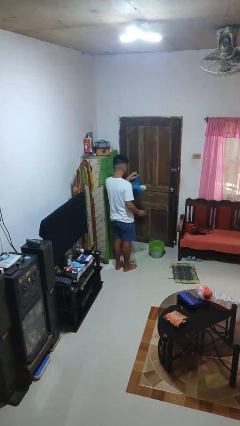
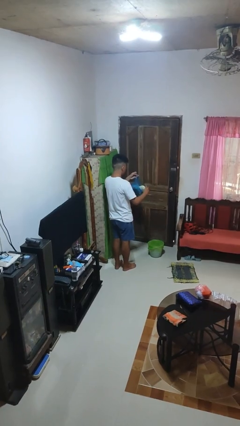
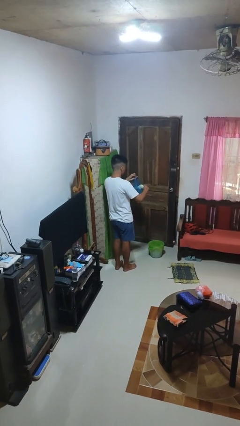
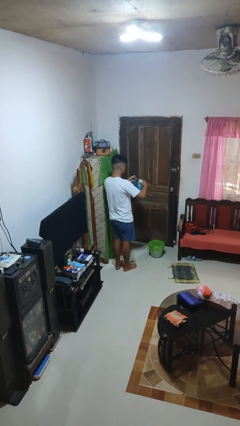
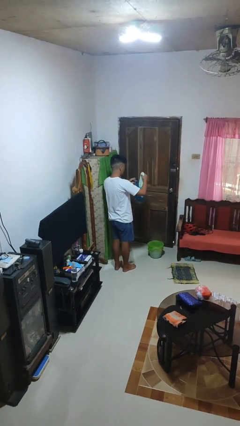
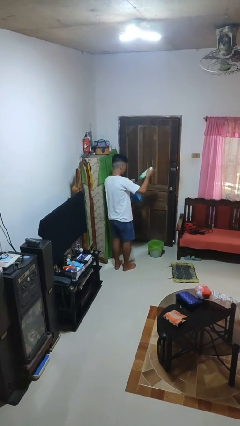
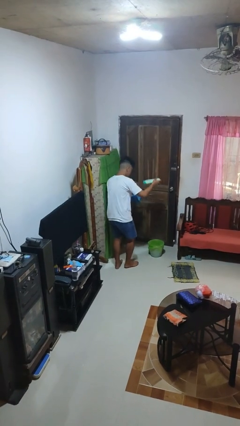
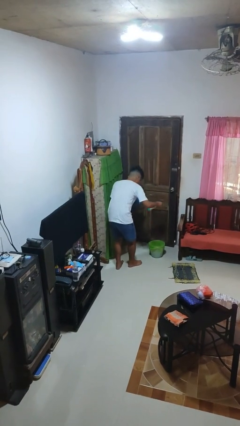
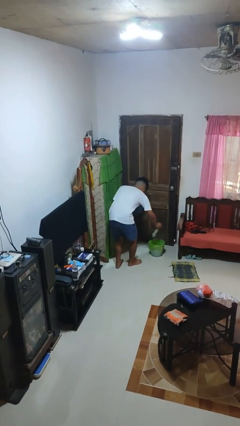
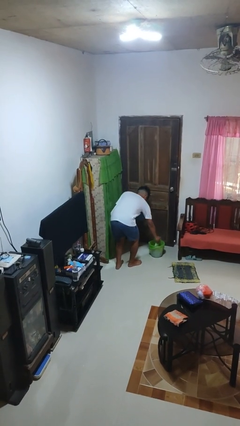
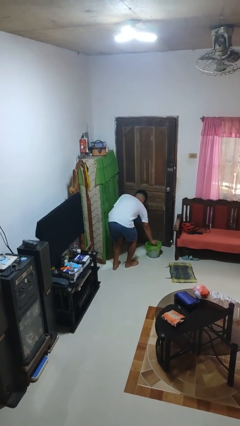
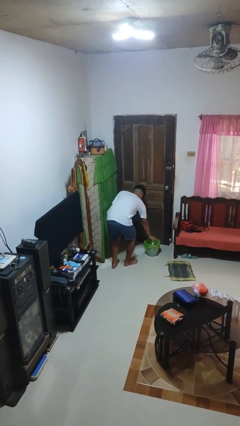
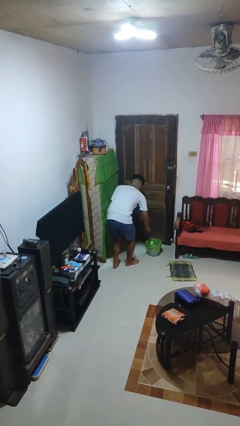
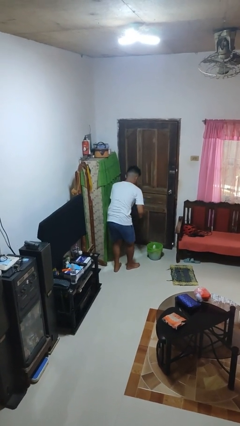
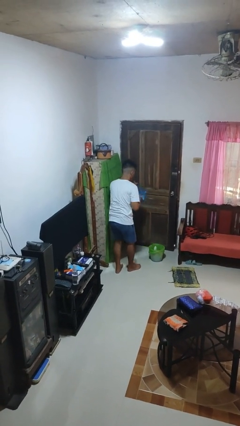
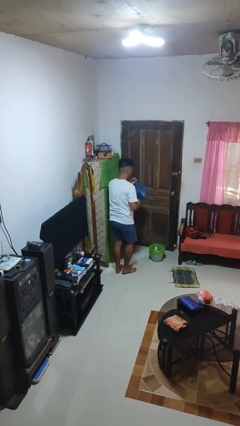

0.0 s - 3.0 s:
person discards trash

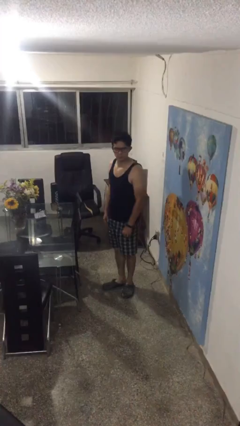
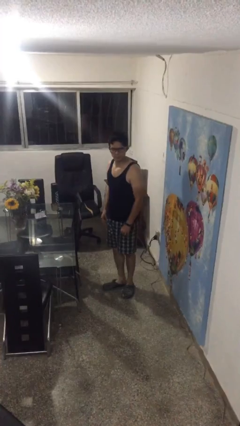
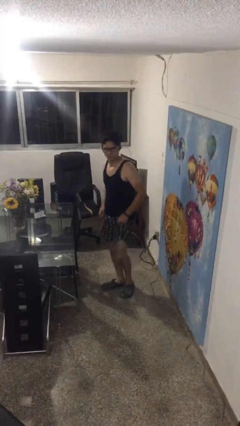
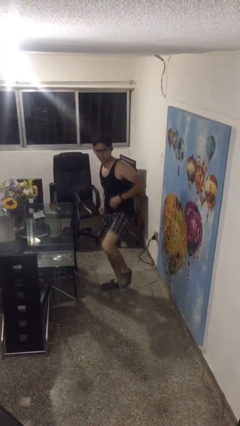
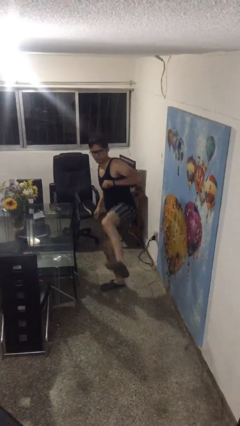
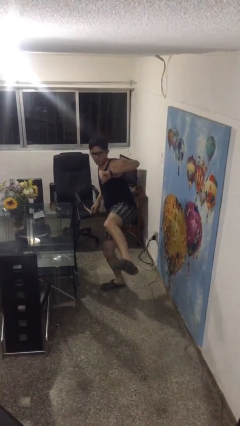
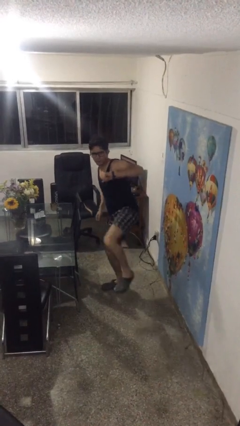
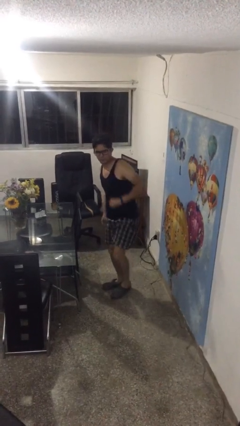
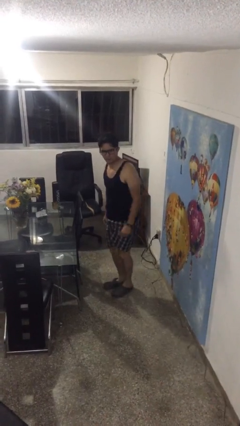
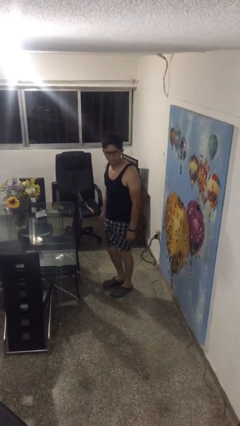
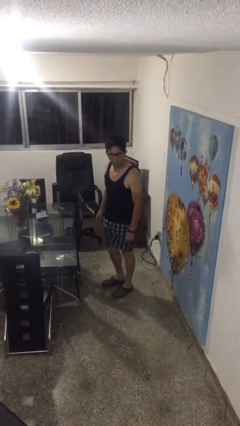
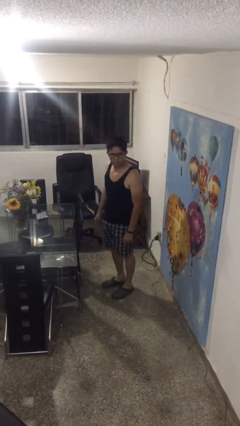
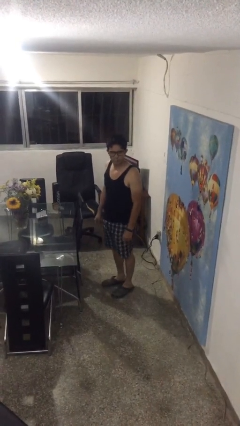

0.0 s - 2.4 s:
person karate kicks

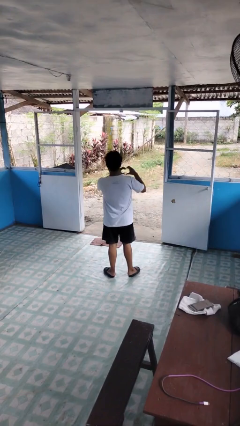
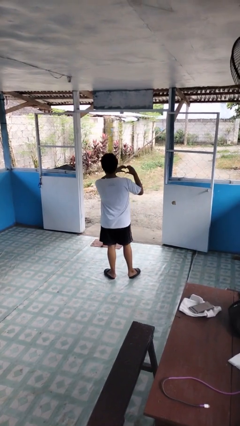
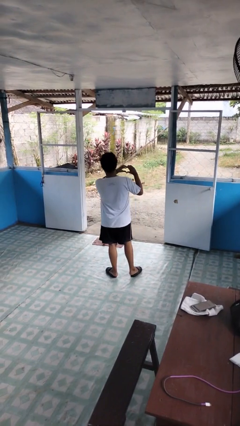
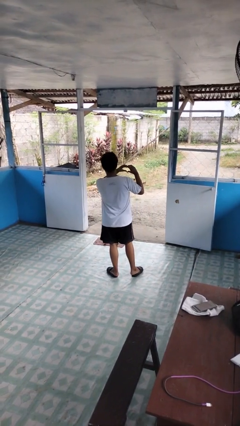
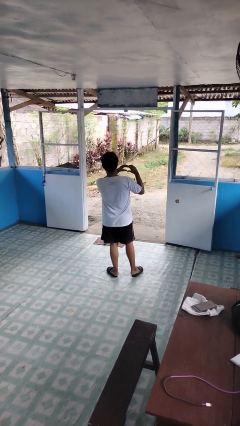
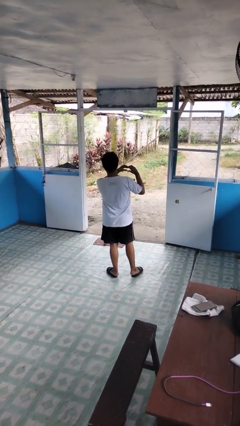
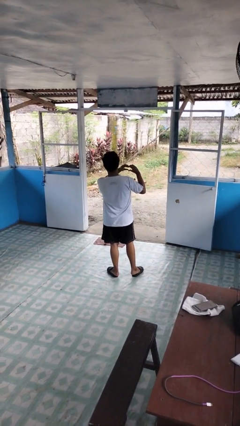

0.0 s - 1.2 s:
person gestures heart

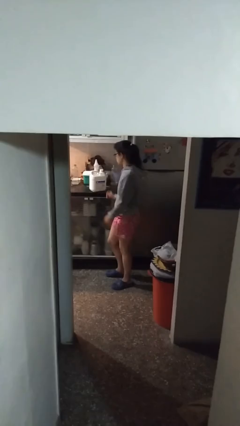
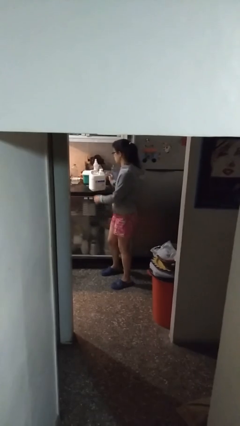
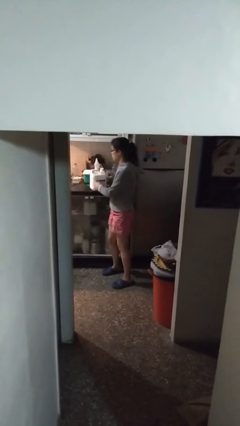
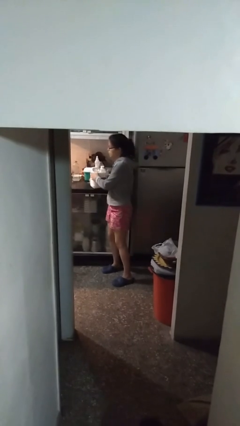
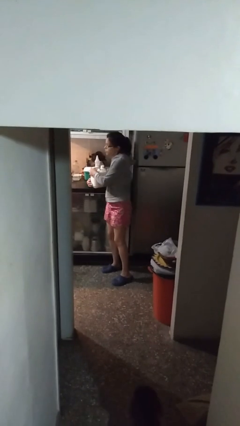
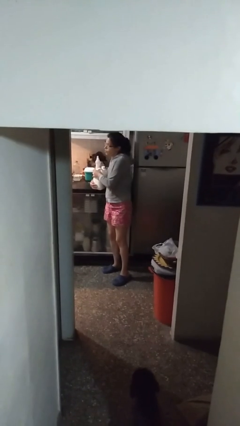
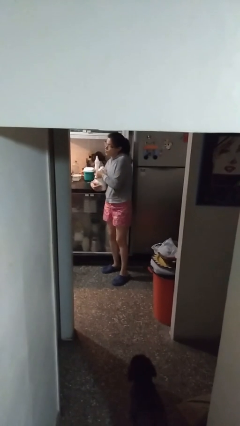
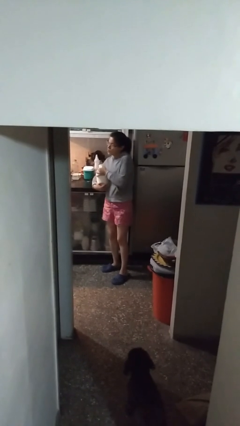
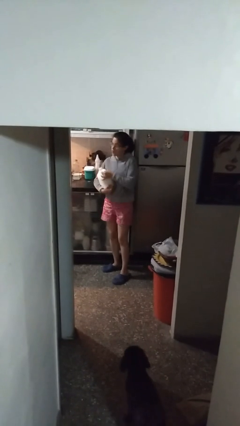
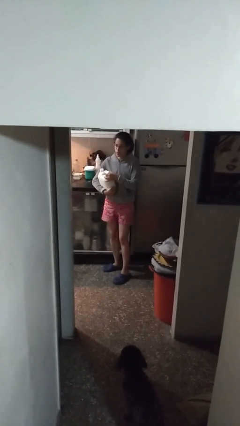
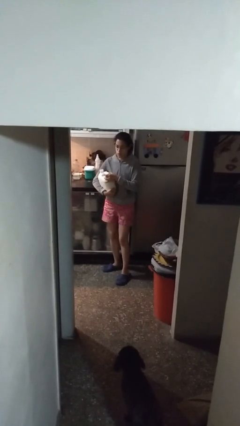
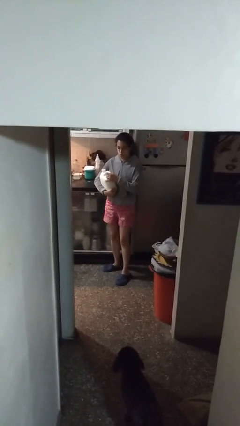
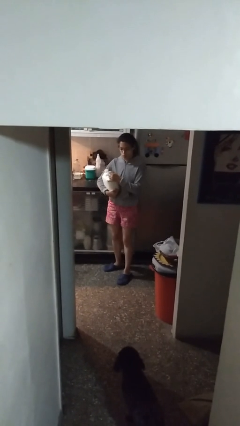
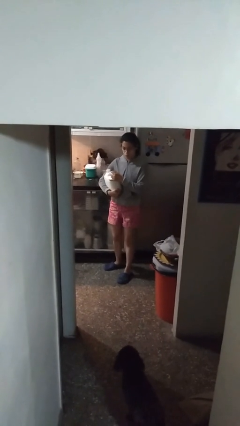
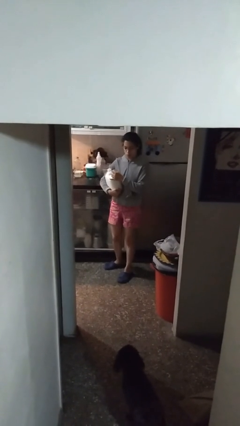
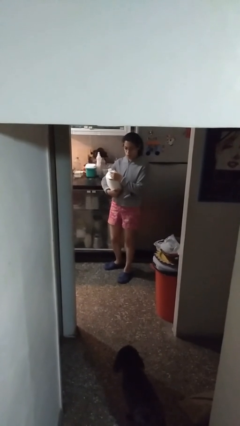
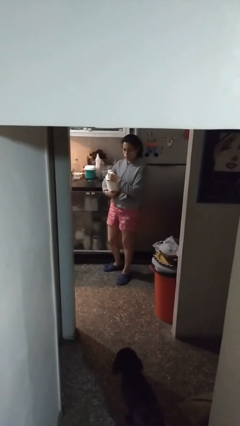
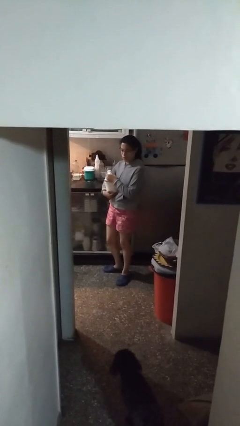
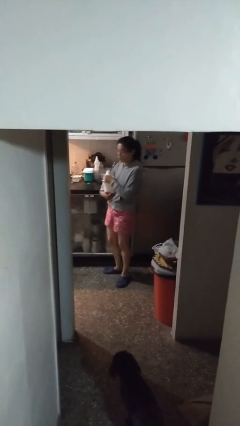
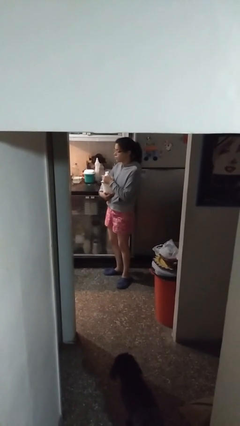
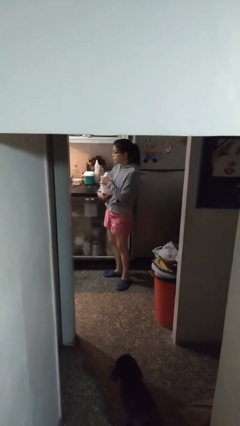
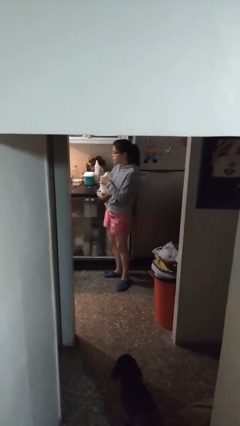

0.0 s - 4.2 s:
person picks up object from countertop

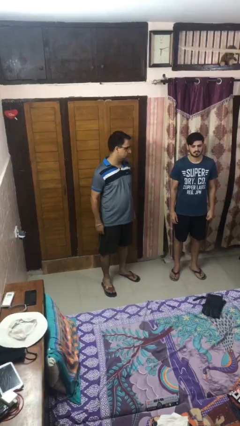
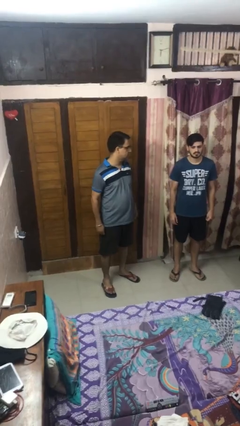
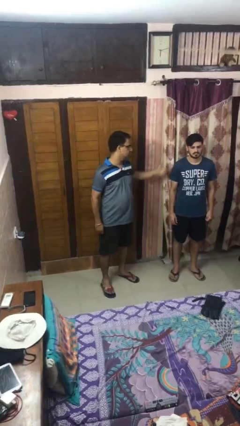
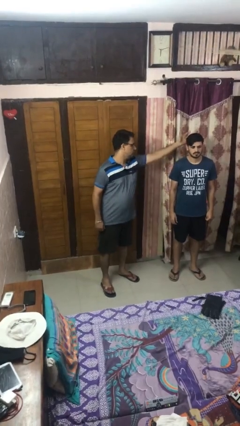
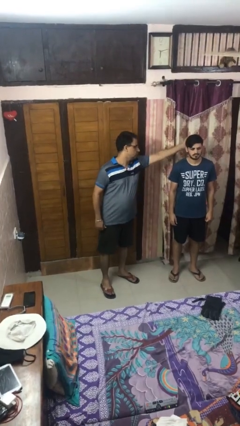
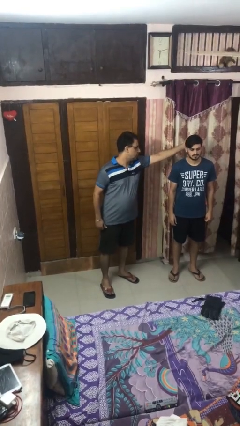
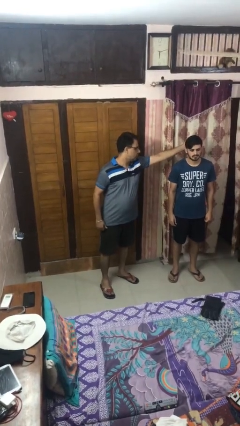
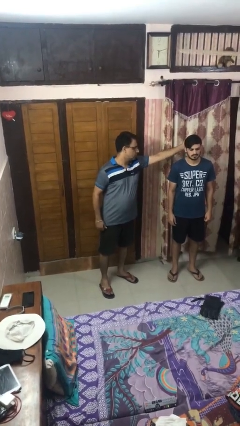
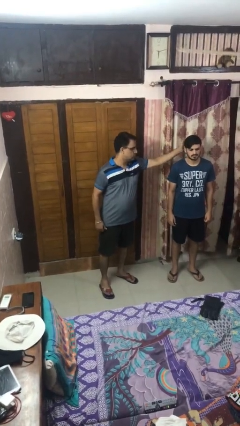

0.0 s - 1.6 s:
person grabs person by hair

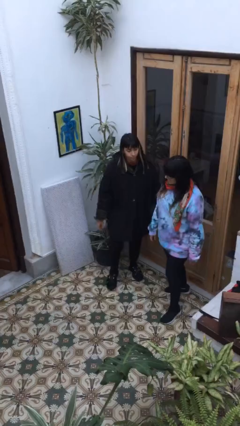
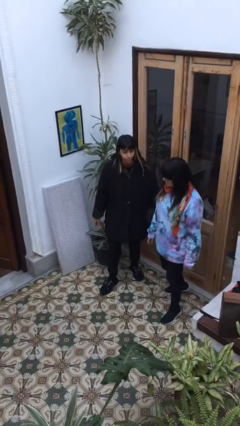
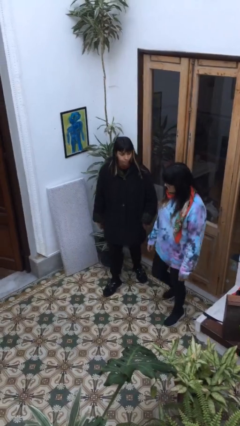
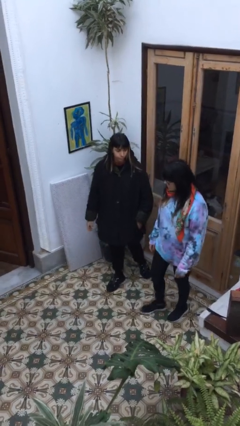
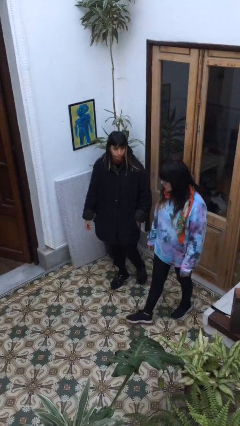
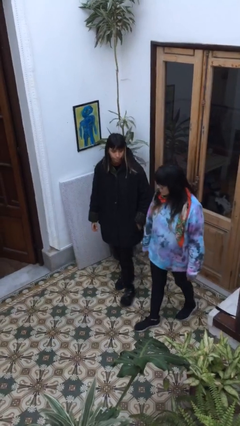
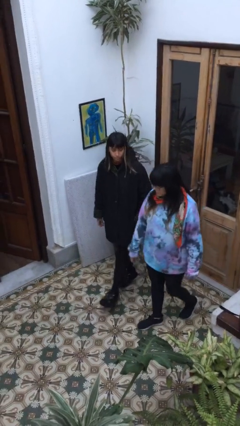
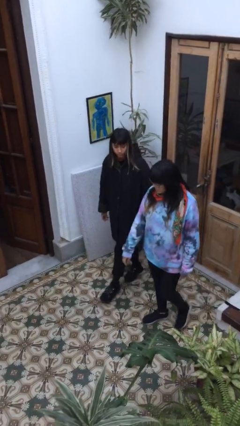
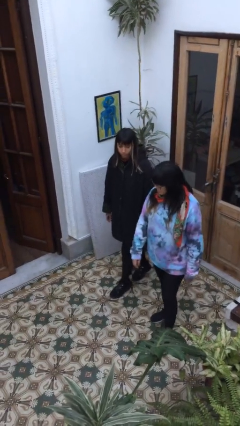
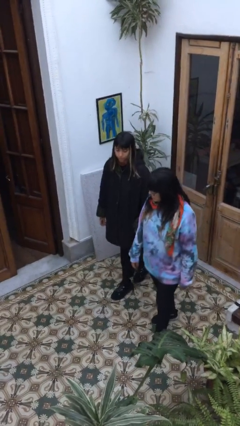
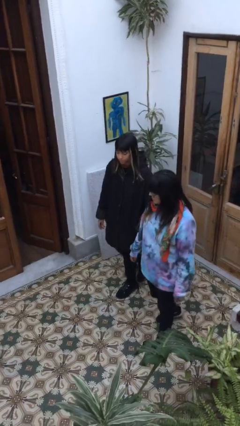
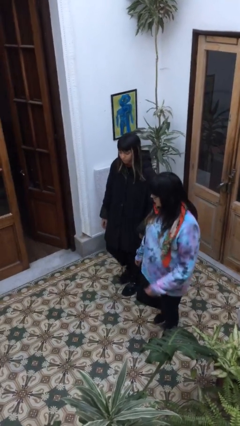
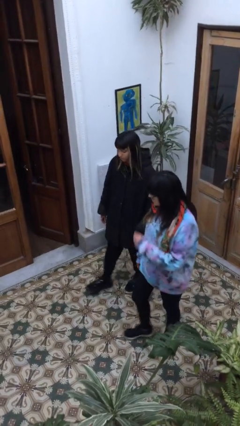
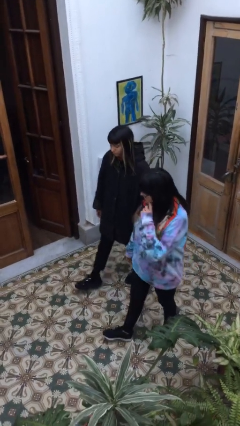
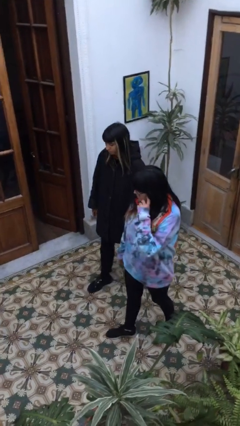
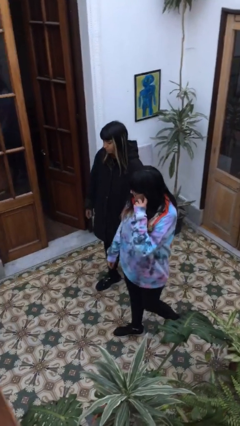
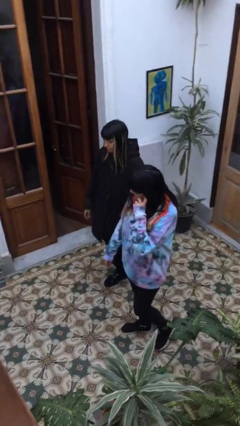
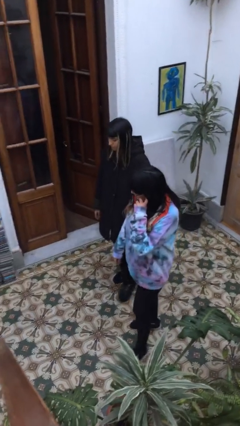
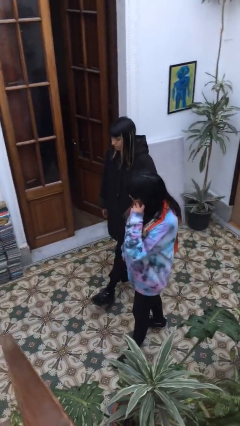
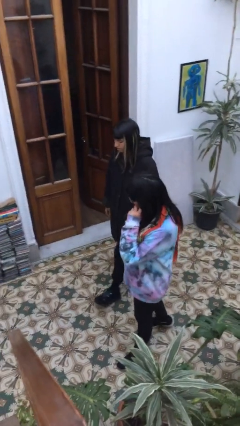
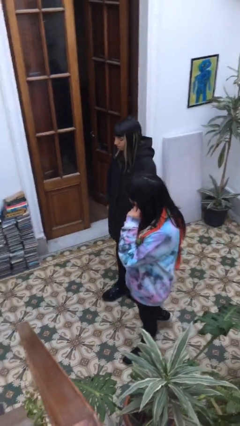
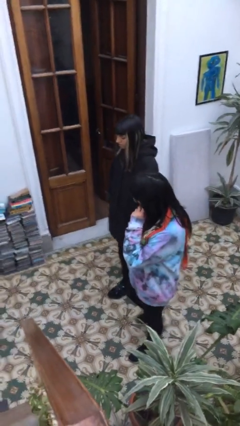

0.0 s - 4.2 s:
person talks to person

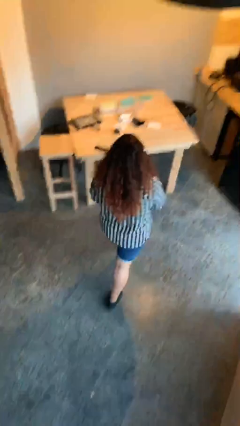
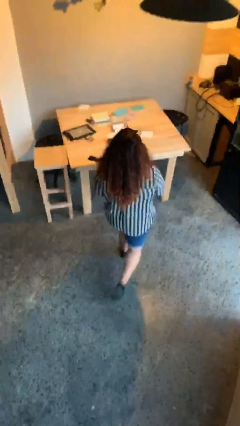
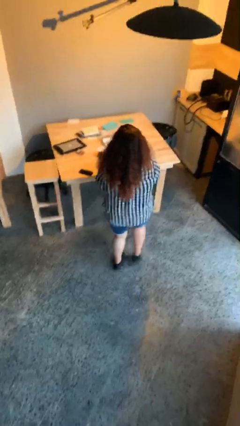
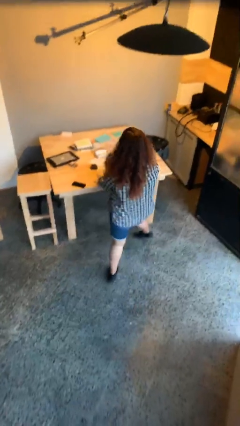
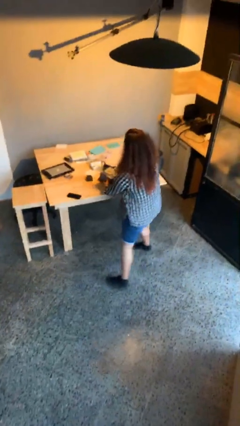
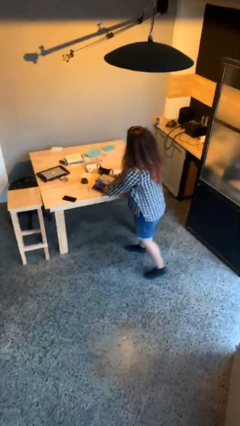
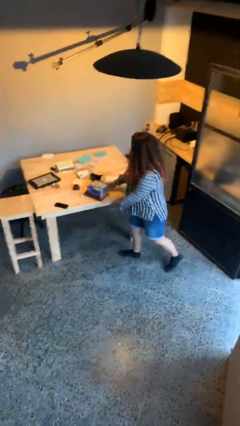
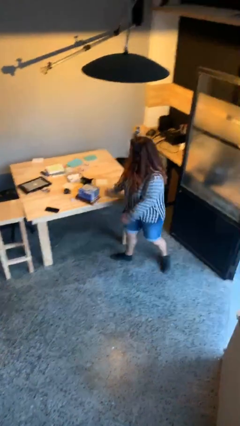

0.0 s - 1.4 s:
person puts down object on table
